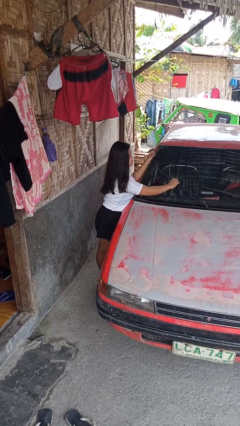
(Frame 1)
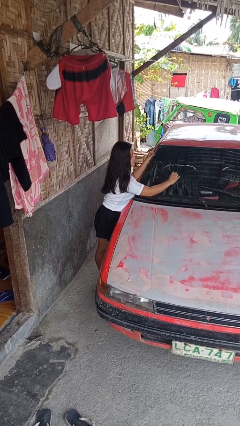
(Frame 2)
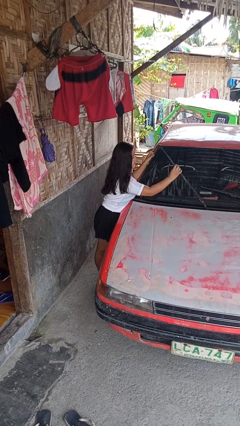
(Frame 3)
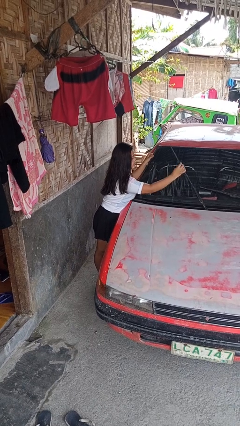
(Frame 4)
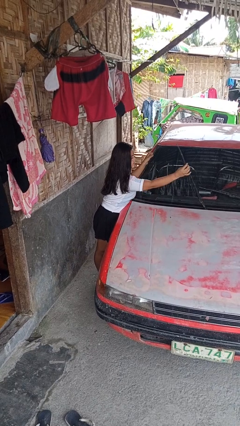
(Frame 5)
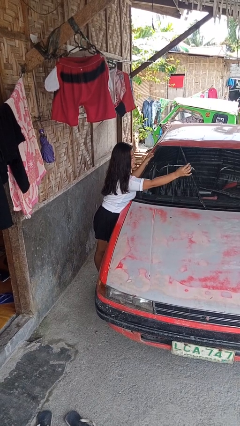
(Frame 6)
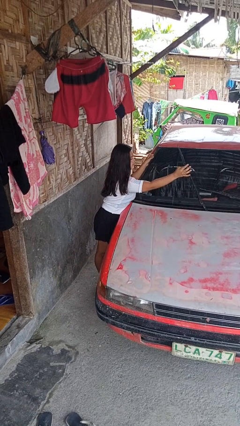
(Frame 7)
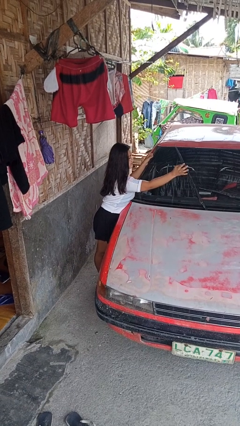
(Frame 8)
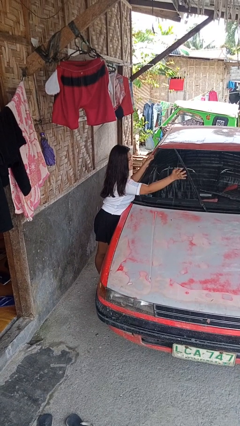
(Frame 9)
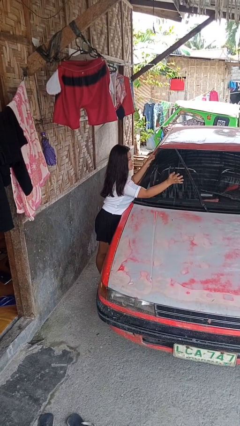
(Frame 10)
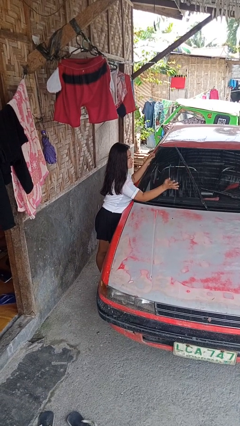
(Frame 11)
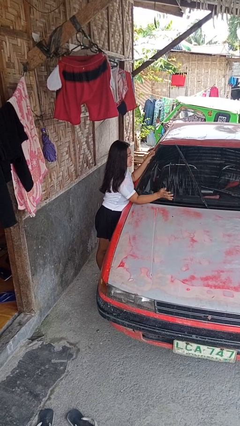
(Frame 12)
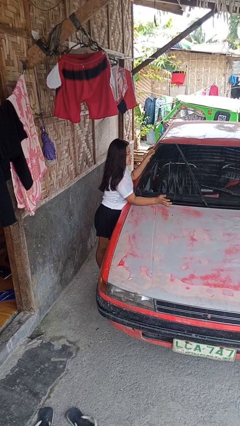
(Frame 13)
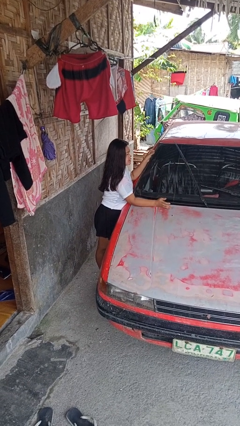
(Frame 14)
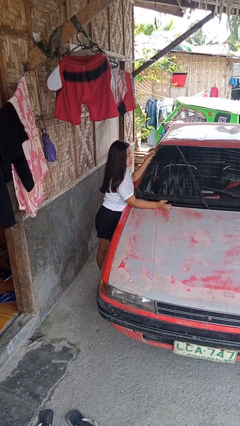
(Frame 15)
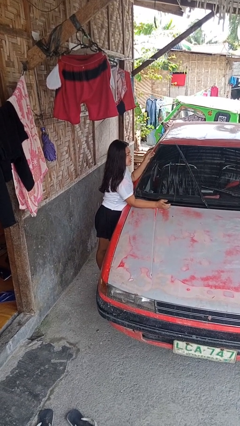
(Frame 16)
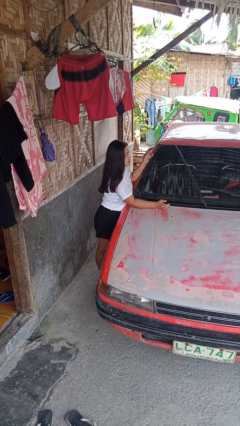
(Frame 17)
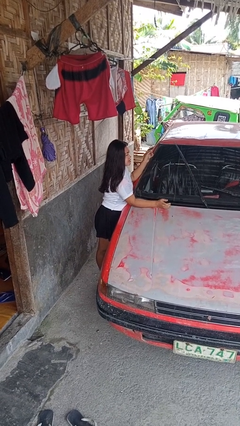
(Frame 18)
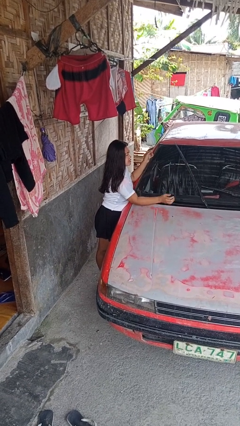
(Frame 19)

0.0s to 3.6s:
person flips up car wipers

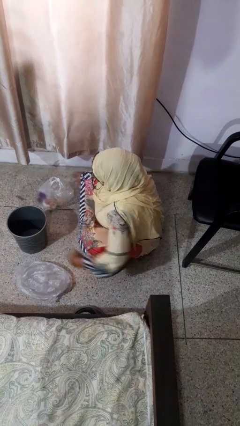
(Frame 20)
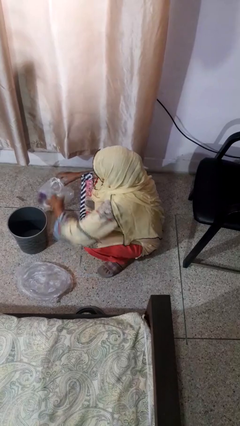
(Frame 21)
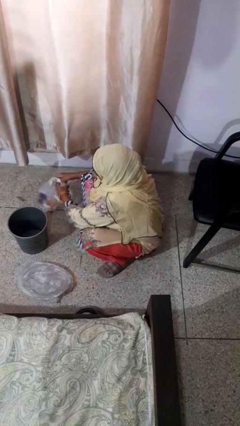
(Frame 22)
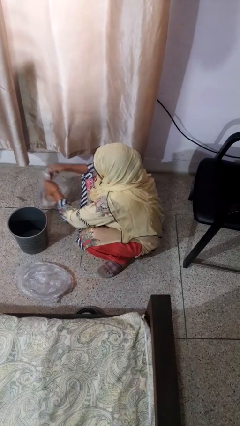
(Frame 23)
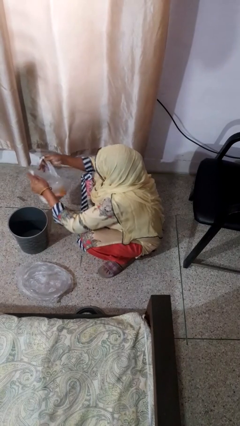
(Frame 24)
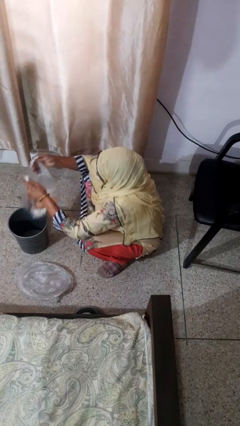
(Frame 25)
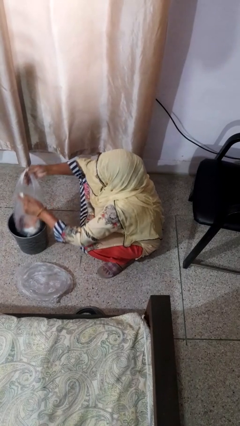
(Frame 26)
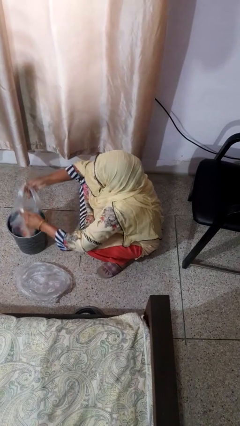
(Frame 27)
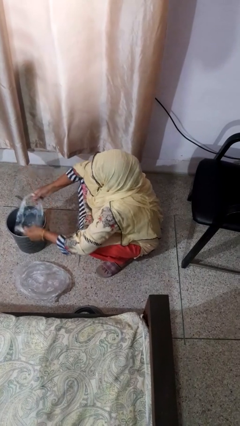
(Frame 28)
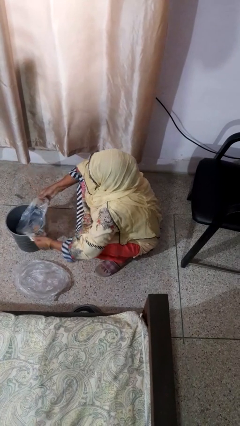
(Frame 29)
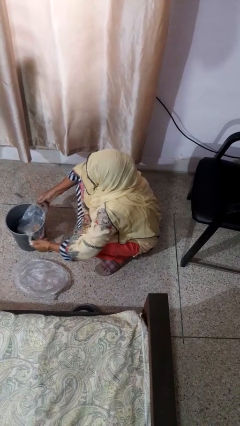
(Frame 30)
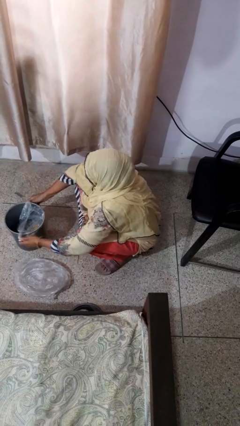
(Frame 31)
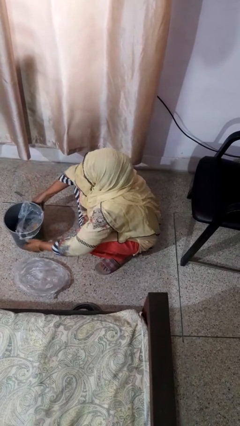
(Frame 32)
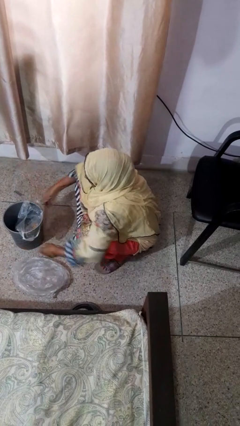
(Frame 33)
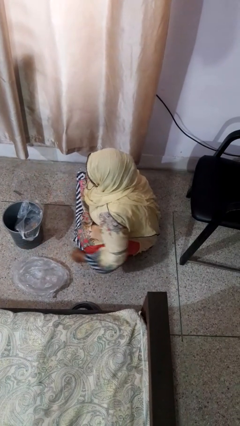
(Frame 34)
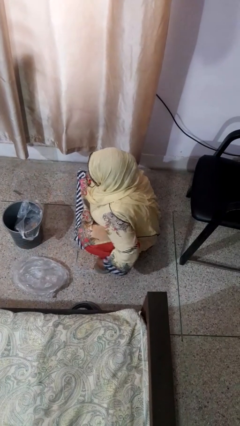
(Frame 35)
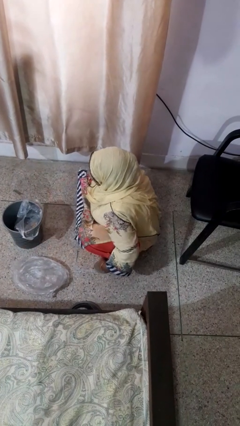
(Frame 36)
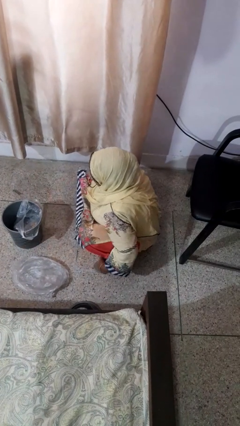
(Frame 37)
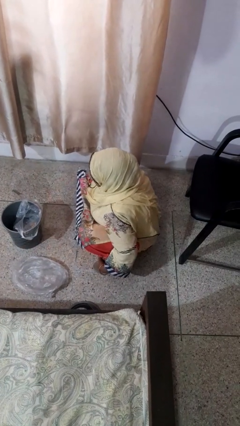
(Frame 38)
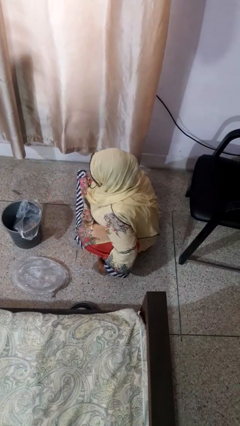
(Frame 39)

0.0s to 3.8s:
person inserts trashbag into trashcan

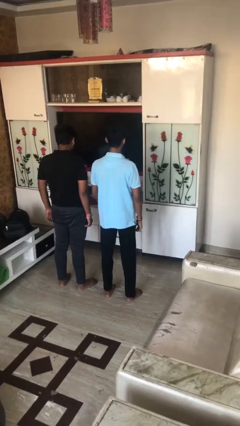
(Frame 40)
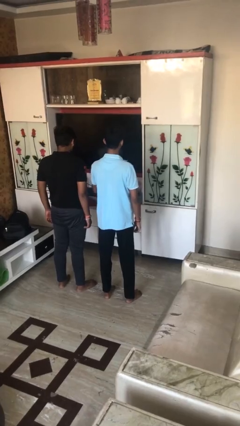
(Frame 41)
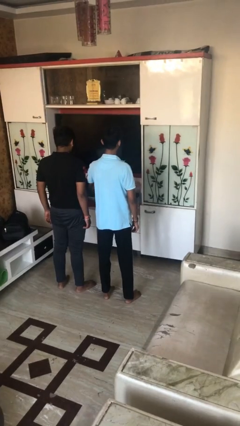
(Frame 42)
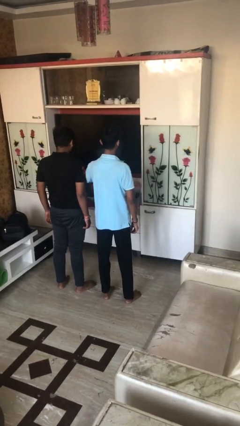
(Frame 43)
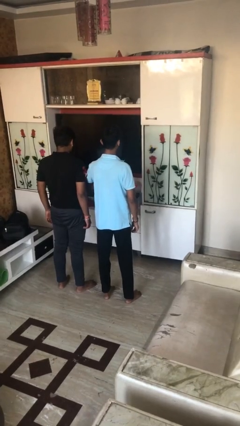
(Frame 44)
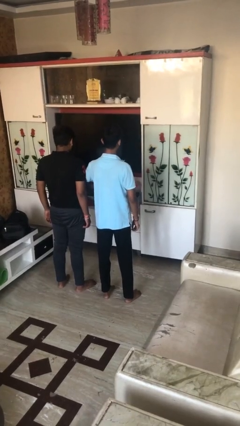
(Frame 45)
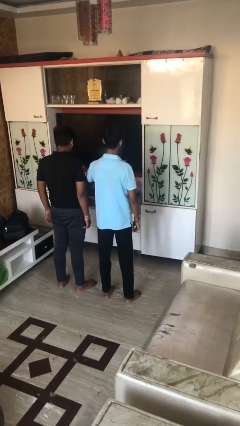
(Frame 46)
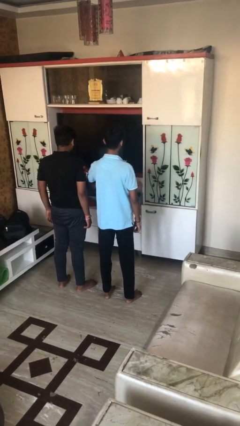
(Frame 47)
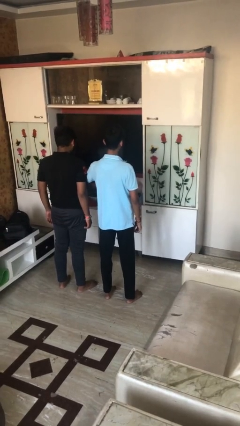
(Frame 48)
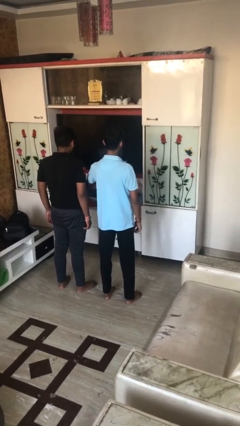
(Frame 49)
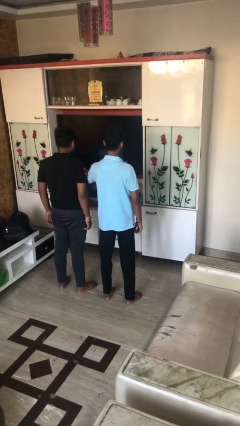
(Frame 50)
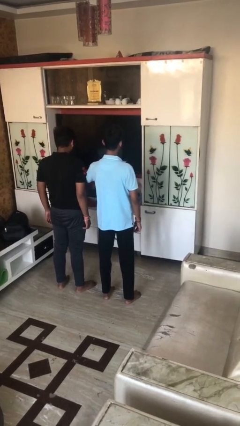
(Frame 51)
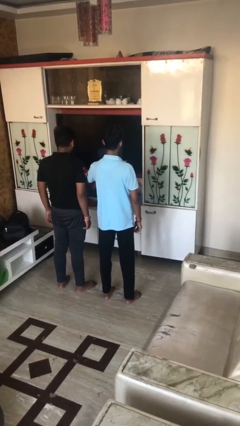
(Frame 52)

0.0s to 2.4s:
person nudges person with elbow

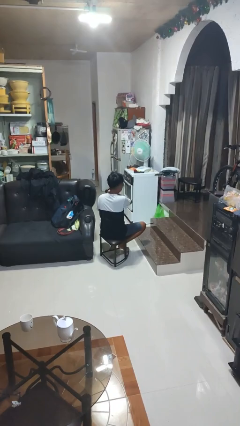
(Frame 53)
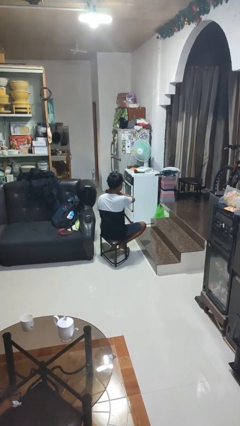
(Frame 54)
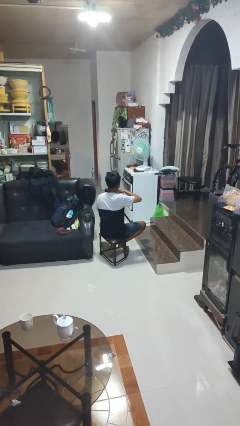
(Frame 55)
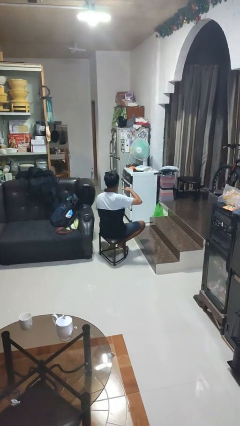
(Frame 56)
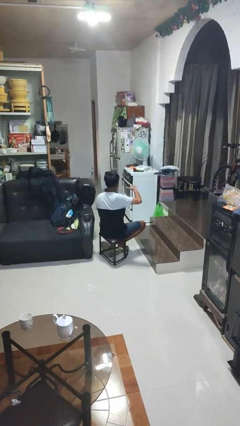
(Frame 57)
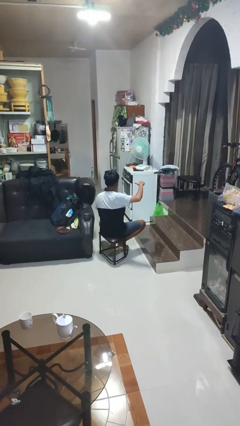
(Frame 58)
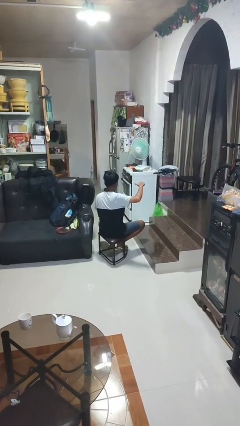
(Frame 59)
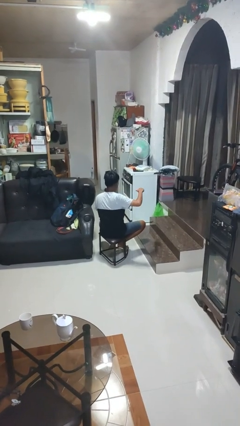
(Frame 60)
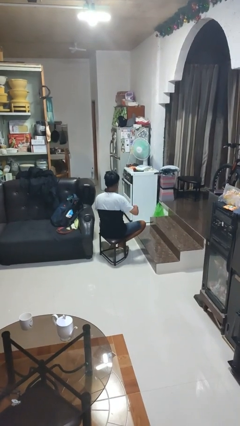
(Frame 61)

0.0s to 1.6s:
person gestures cut

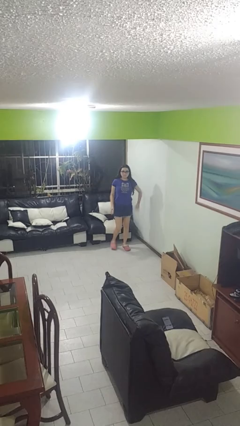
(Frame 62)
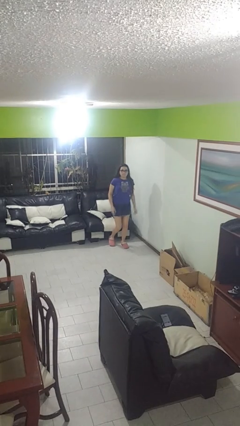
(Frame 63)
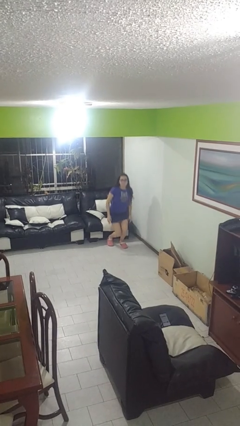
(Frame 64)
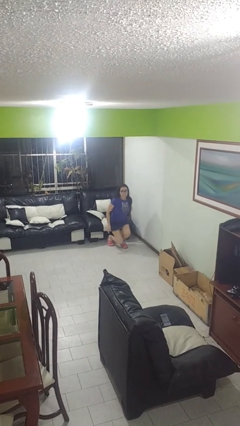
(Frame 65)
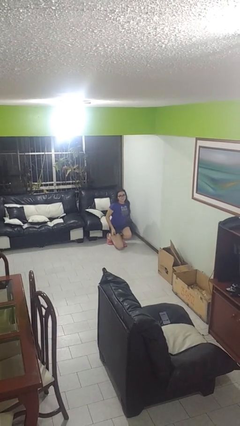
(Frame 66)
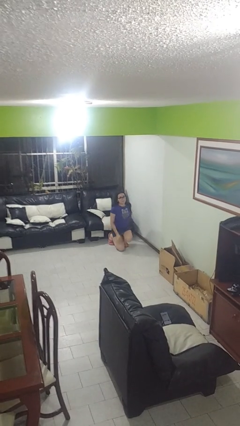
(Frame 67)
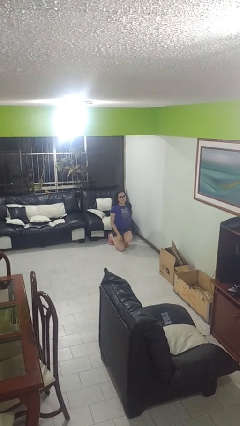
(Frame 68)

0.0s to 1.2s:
person kneels

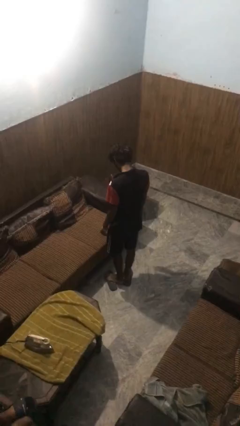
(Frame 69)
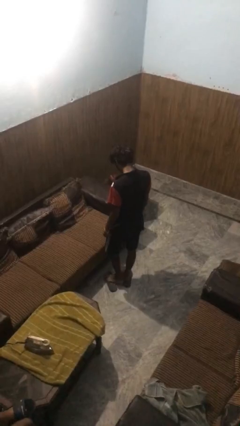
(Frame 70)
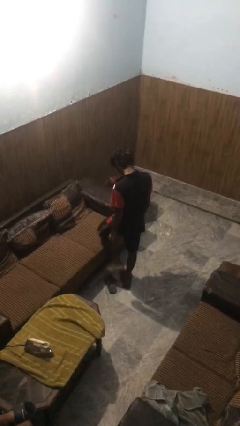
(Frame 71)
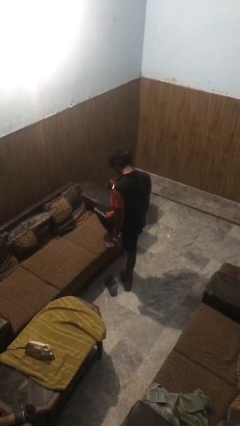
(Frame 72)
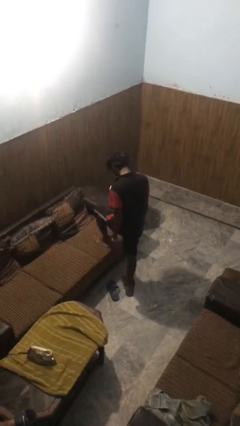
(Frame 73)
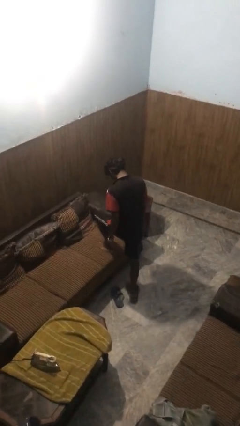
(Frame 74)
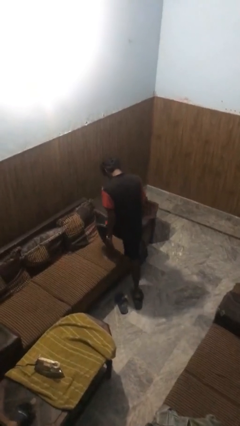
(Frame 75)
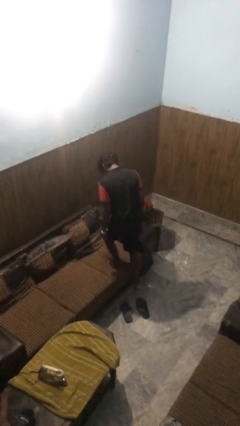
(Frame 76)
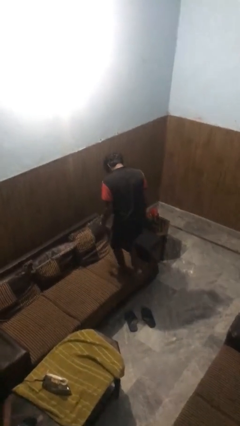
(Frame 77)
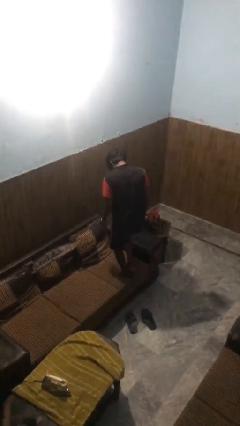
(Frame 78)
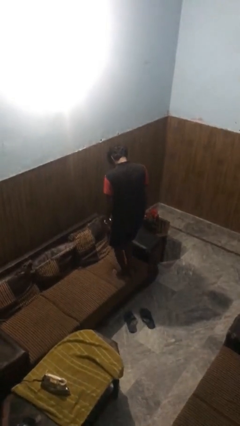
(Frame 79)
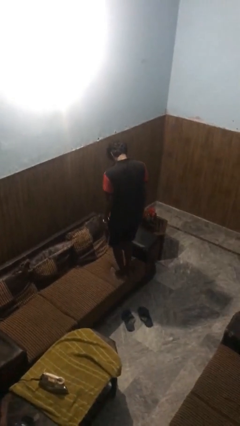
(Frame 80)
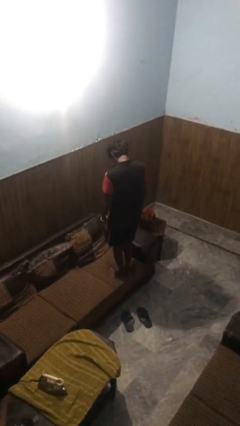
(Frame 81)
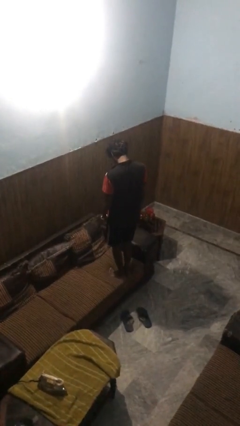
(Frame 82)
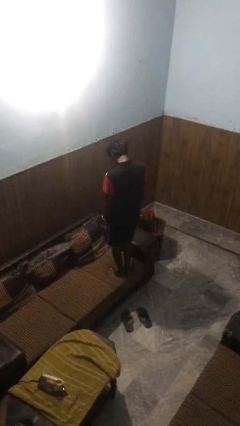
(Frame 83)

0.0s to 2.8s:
person climbs on couch

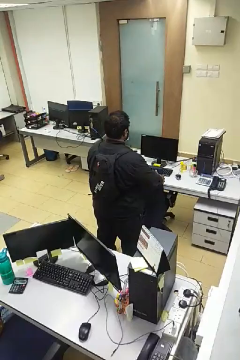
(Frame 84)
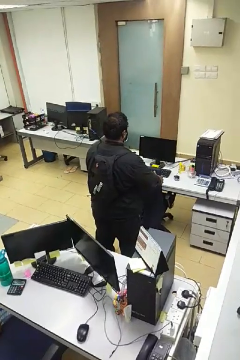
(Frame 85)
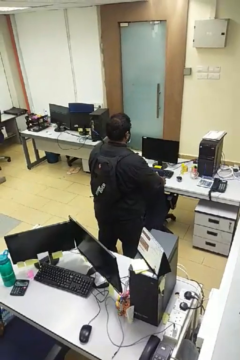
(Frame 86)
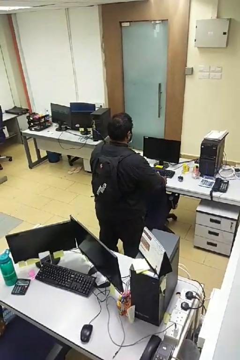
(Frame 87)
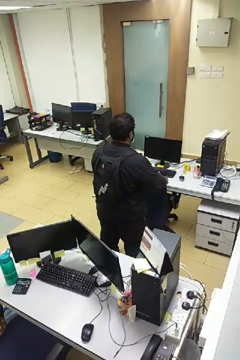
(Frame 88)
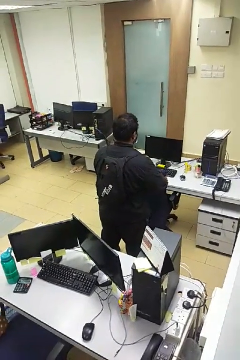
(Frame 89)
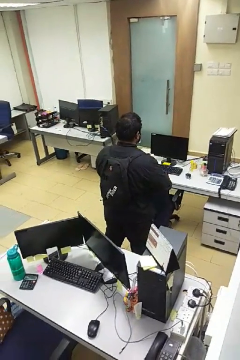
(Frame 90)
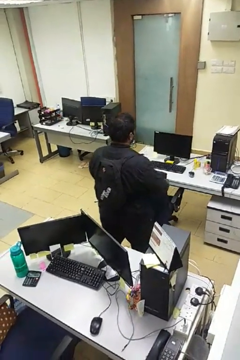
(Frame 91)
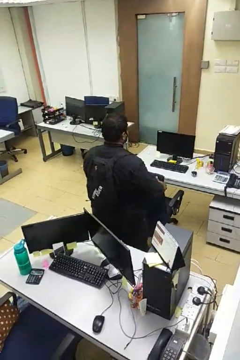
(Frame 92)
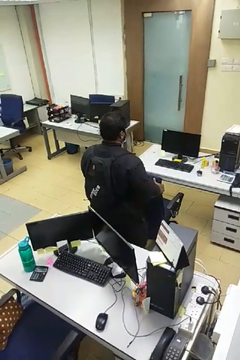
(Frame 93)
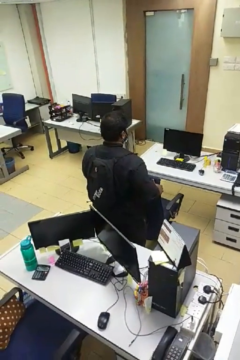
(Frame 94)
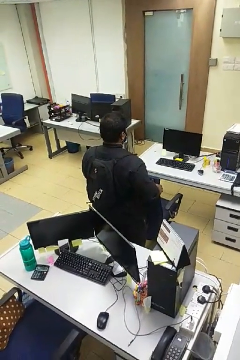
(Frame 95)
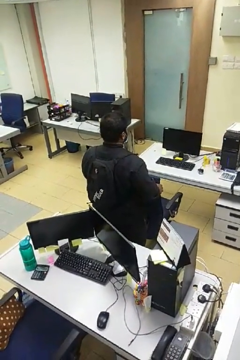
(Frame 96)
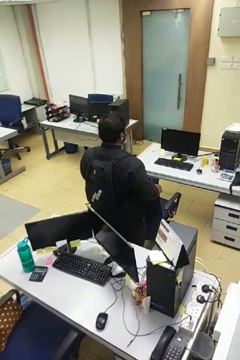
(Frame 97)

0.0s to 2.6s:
person pulls out chair
